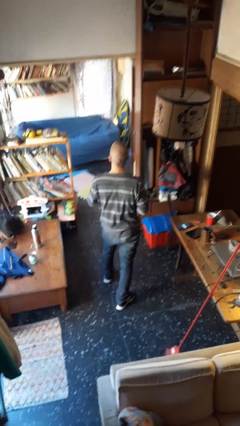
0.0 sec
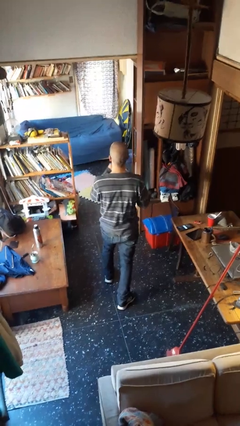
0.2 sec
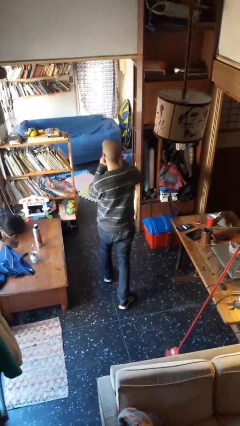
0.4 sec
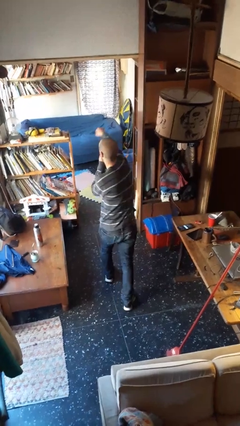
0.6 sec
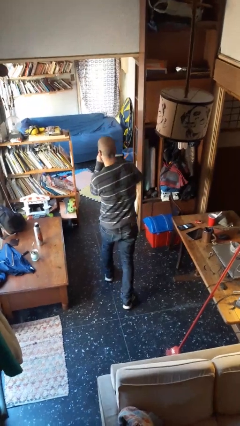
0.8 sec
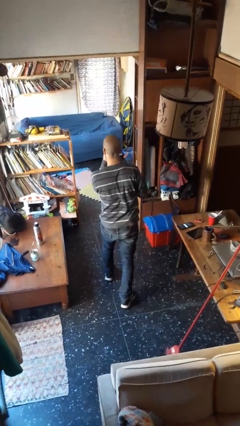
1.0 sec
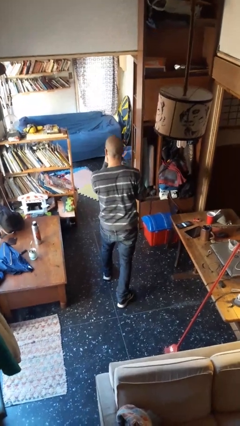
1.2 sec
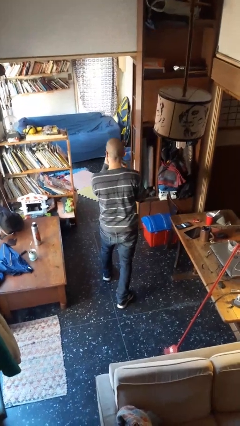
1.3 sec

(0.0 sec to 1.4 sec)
person karate chop

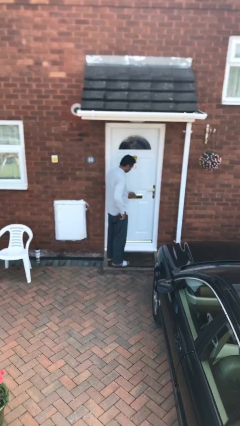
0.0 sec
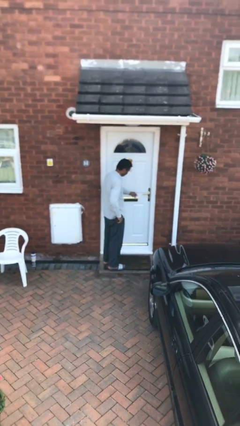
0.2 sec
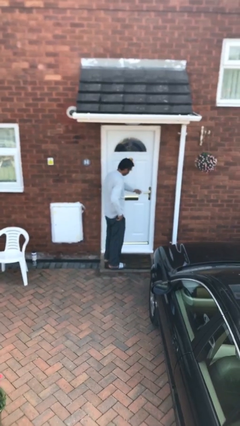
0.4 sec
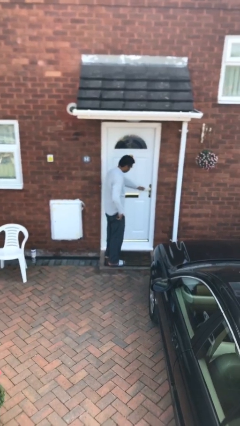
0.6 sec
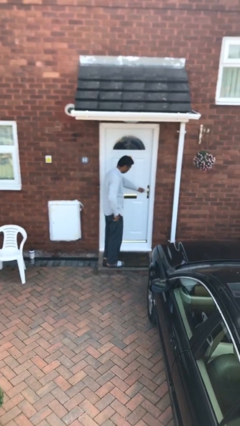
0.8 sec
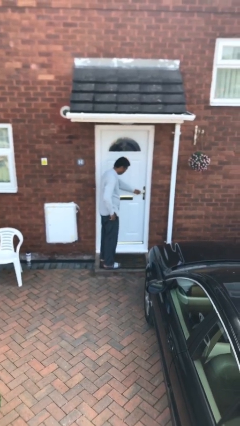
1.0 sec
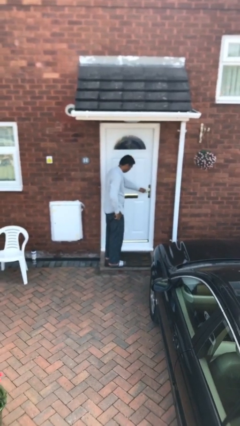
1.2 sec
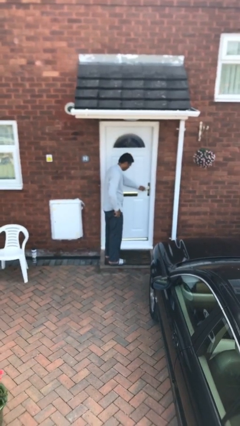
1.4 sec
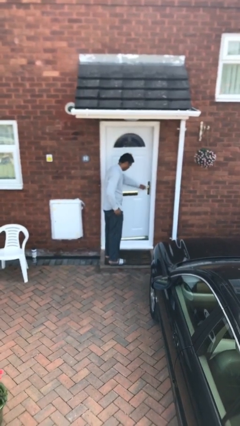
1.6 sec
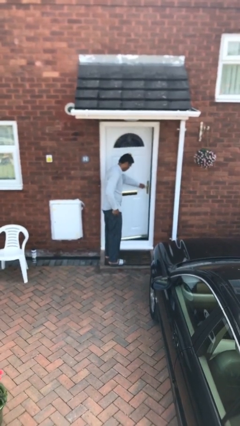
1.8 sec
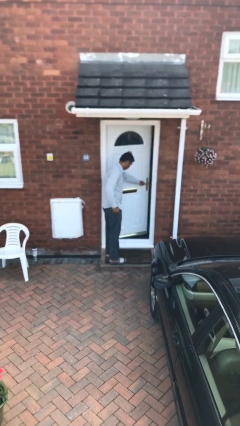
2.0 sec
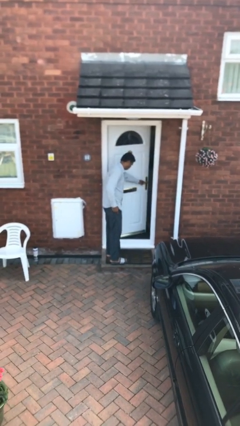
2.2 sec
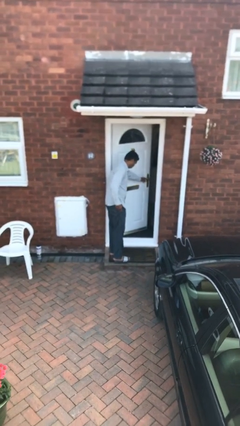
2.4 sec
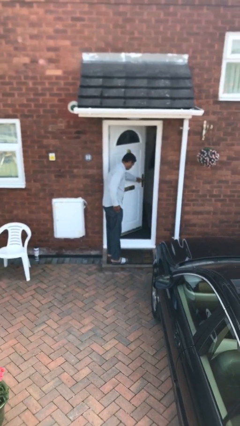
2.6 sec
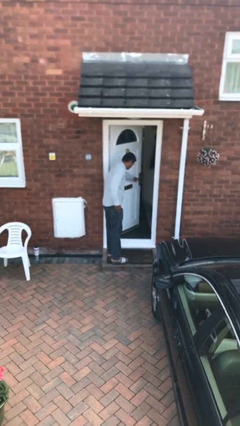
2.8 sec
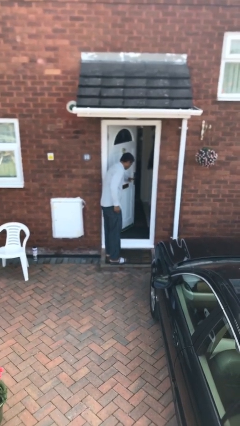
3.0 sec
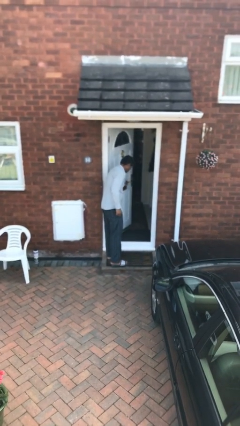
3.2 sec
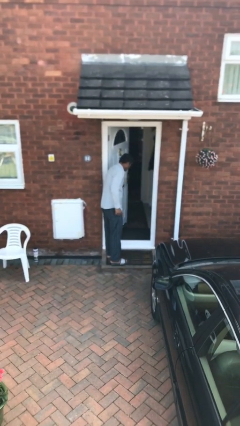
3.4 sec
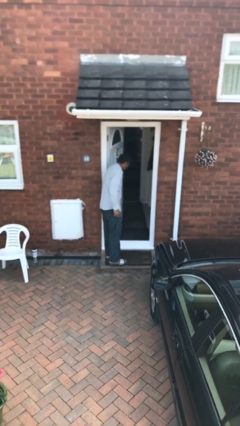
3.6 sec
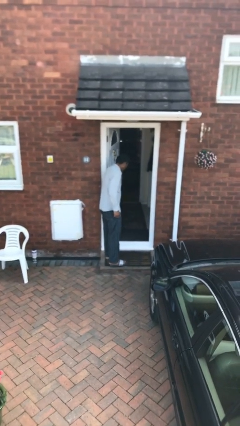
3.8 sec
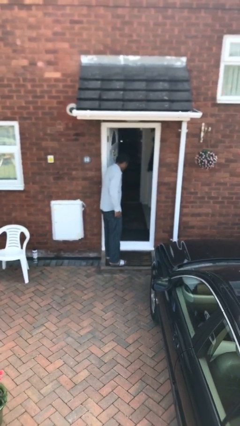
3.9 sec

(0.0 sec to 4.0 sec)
person opens facility door

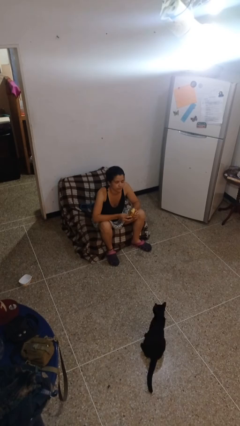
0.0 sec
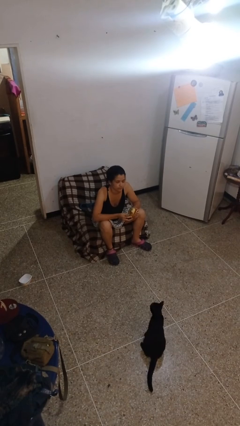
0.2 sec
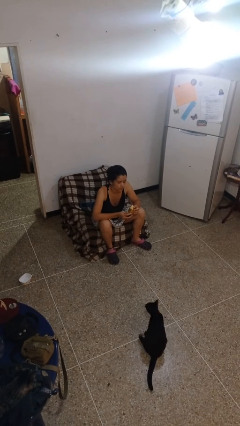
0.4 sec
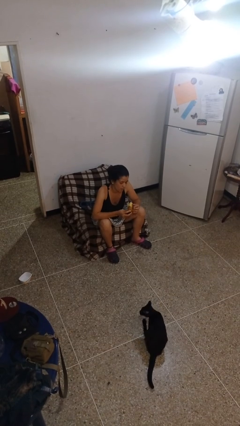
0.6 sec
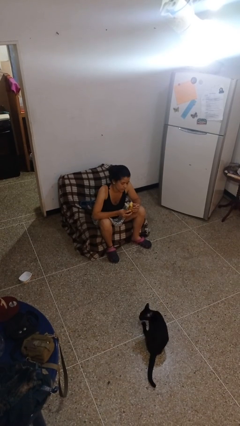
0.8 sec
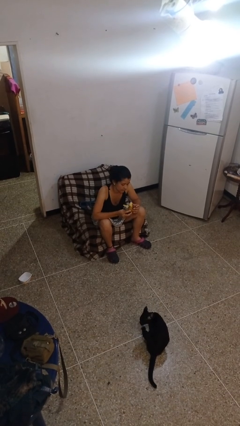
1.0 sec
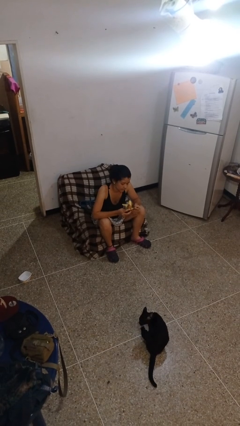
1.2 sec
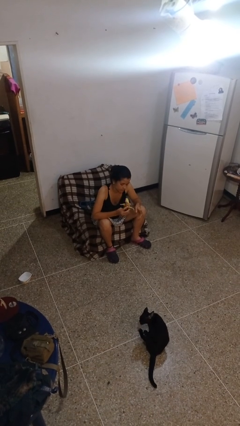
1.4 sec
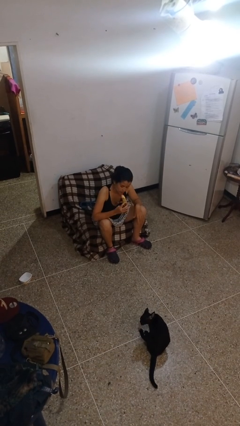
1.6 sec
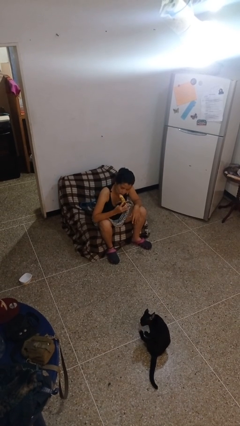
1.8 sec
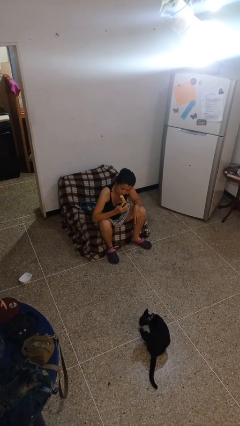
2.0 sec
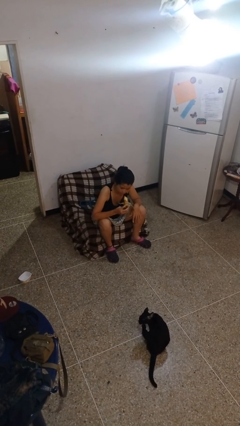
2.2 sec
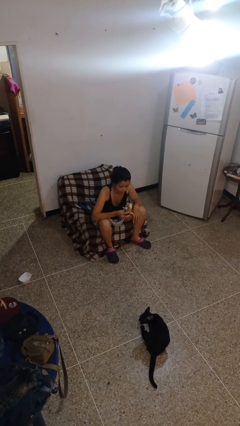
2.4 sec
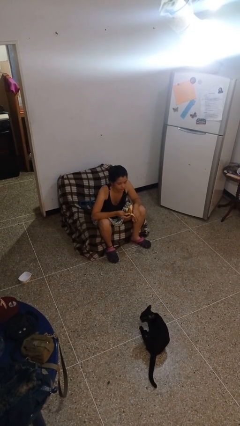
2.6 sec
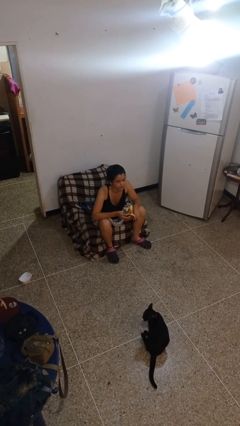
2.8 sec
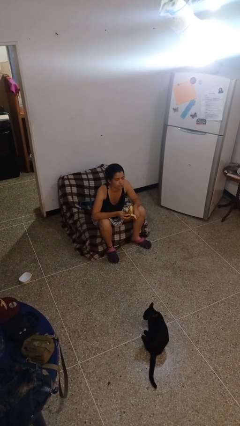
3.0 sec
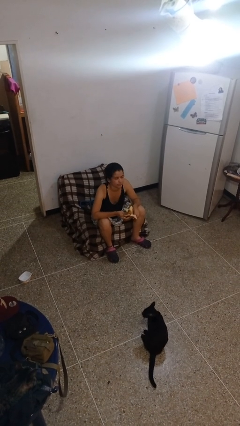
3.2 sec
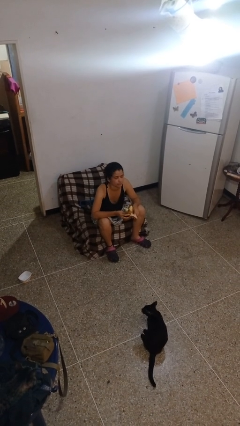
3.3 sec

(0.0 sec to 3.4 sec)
person eats banana

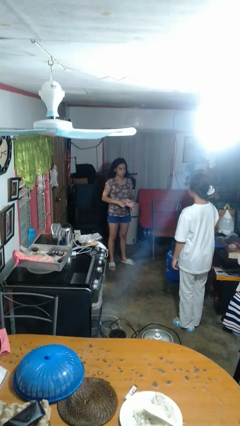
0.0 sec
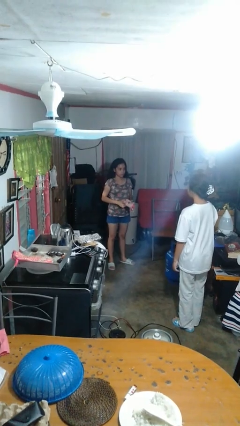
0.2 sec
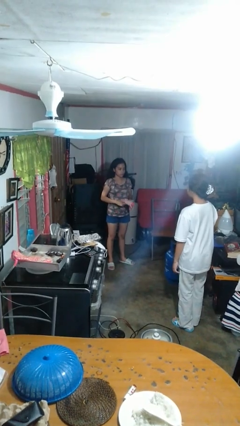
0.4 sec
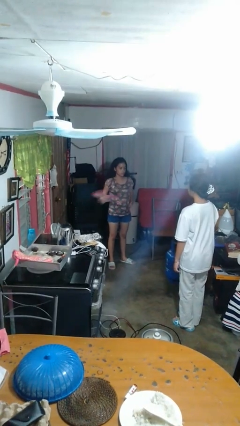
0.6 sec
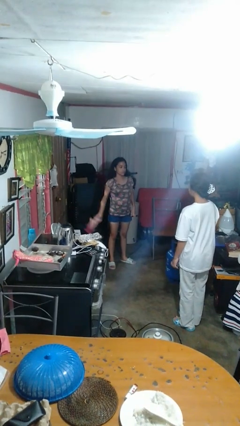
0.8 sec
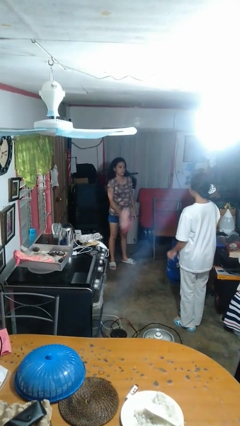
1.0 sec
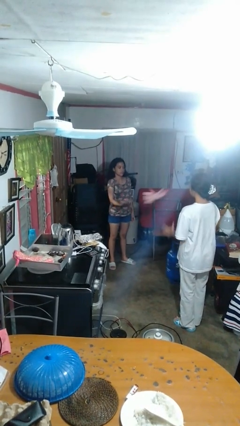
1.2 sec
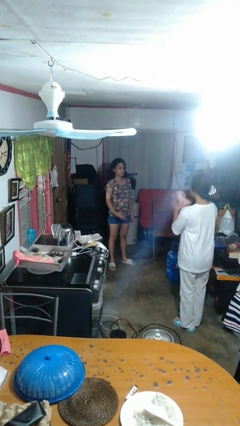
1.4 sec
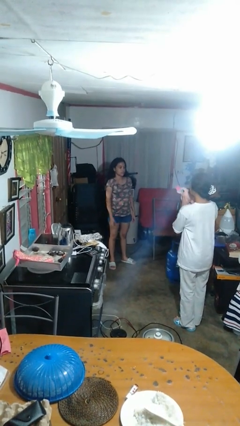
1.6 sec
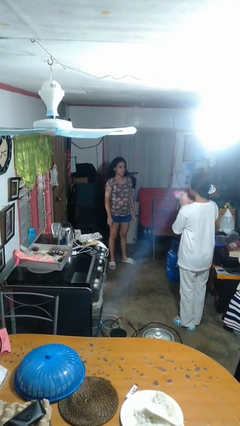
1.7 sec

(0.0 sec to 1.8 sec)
person throws object to person

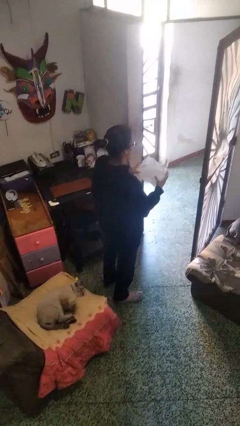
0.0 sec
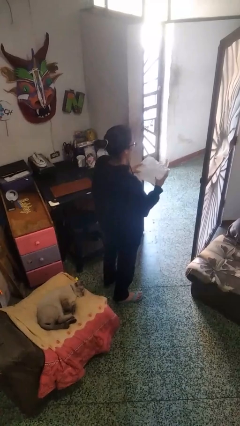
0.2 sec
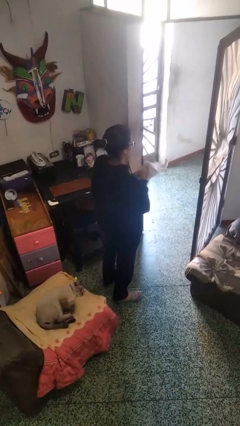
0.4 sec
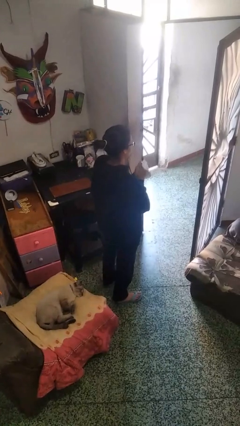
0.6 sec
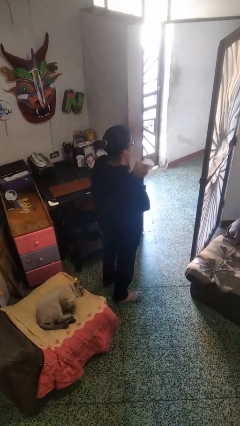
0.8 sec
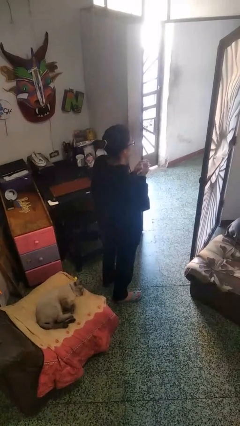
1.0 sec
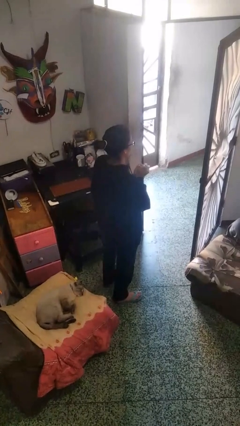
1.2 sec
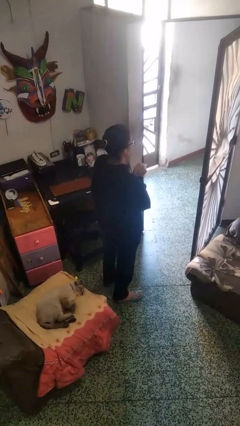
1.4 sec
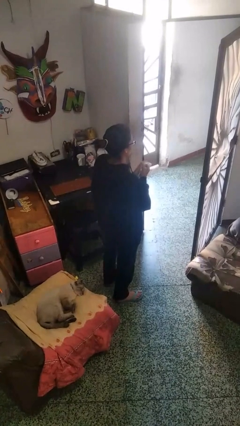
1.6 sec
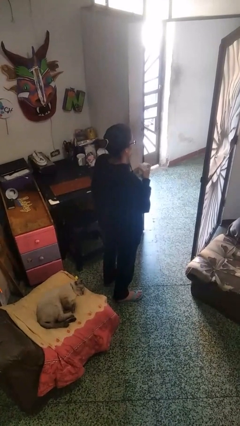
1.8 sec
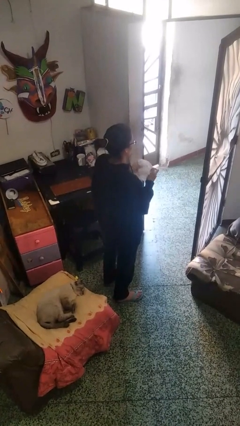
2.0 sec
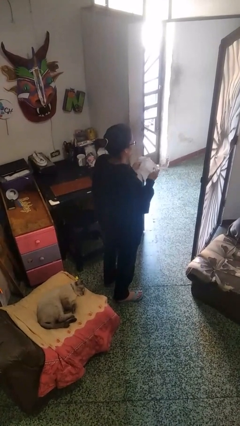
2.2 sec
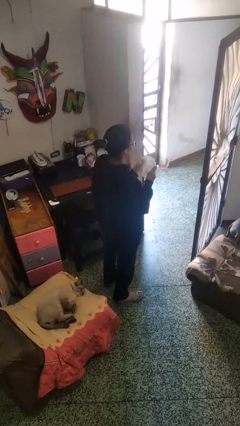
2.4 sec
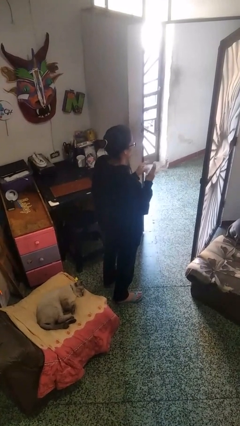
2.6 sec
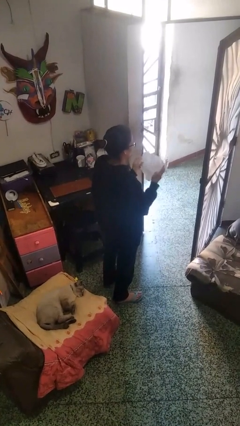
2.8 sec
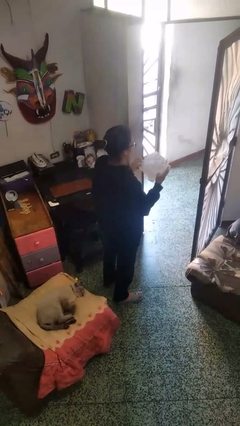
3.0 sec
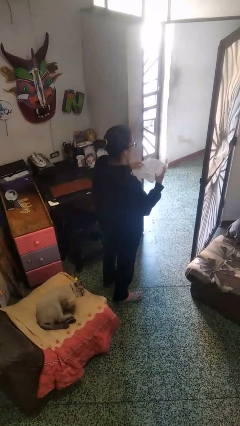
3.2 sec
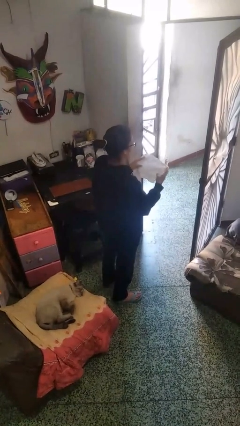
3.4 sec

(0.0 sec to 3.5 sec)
person crumples paper

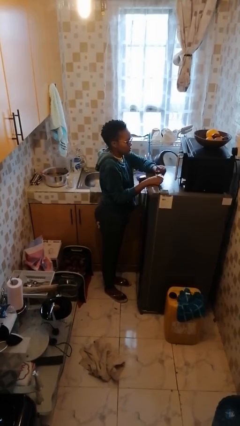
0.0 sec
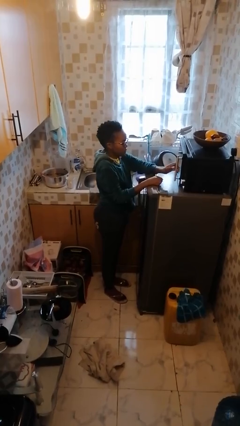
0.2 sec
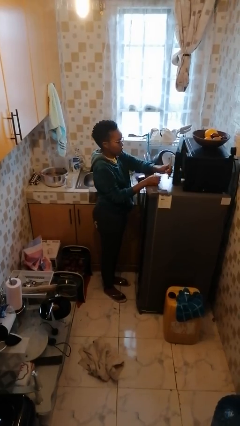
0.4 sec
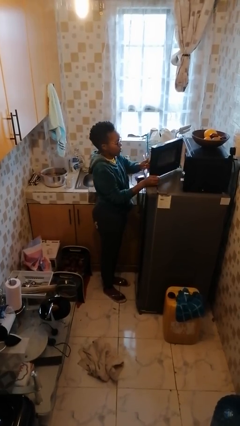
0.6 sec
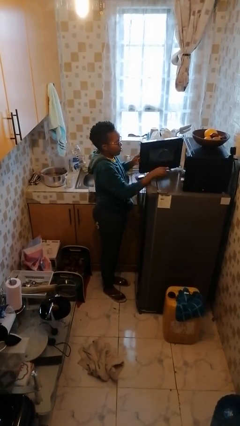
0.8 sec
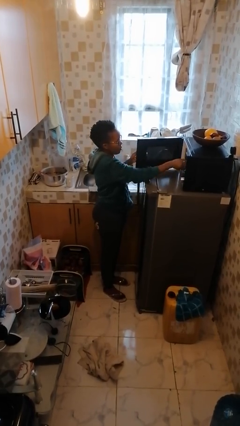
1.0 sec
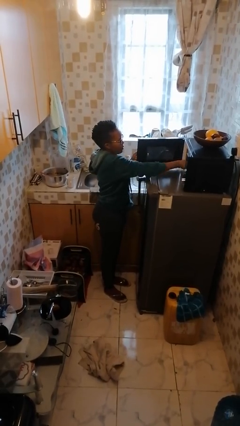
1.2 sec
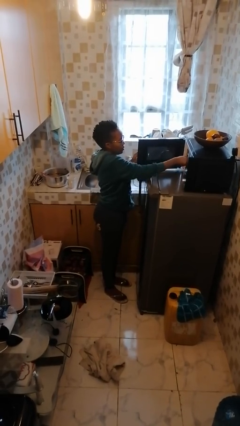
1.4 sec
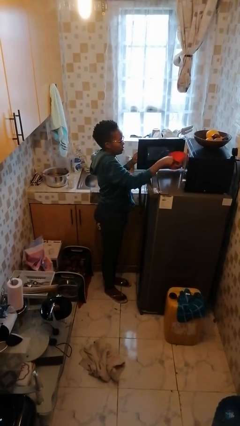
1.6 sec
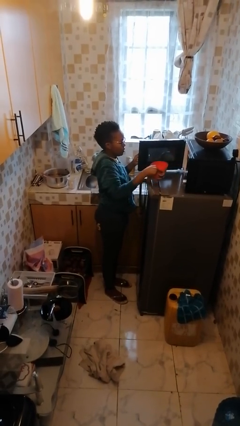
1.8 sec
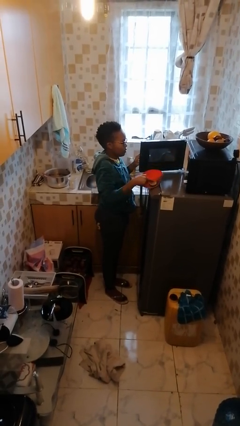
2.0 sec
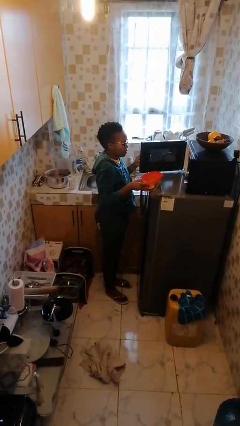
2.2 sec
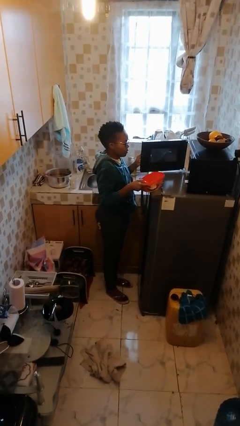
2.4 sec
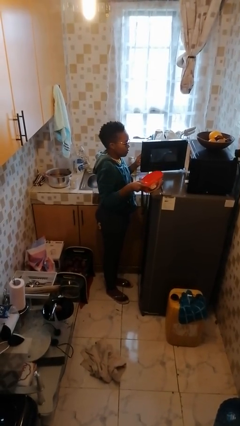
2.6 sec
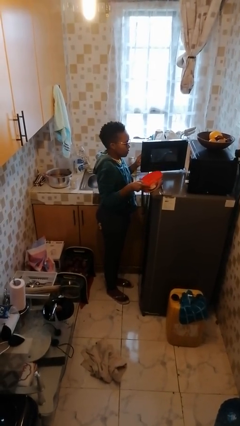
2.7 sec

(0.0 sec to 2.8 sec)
person takes object from microwave

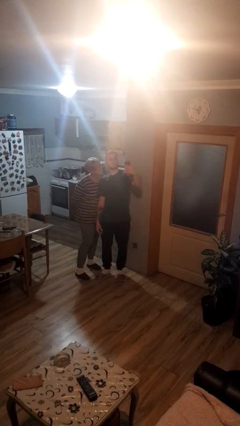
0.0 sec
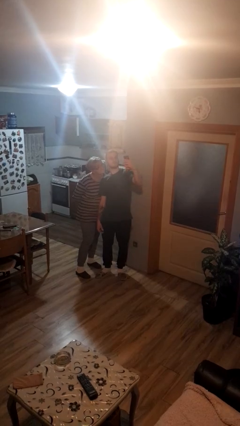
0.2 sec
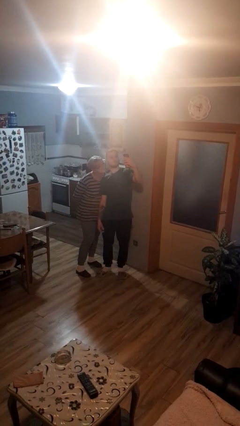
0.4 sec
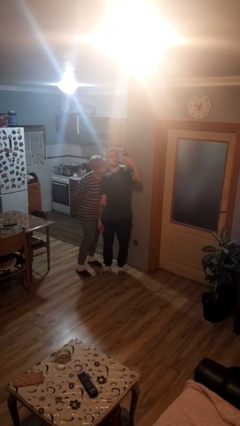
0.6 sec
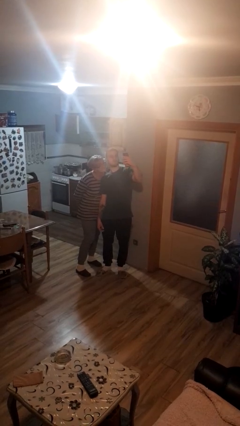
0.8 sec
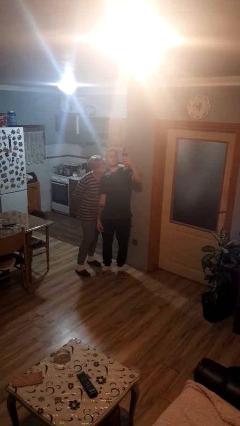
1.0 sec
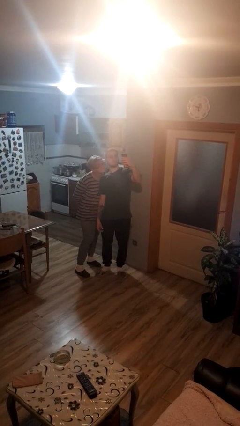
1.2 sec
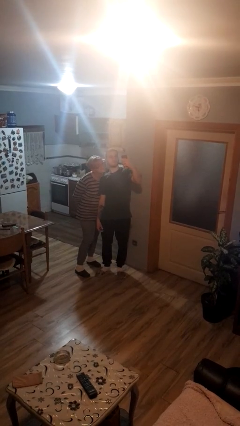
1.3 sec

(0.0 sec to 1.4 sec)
person takes selfie with person
